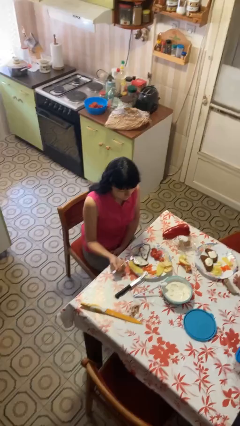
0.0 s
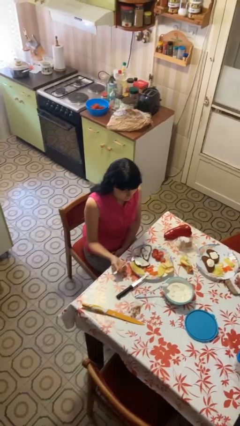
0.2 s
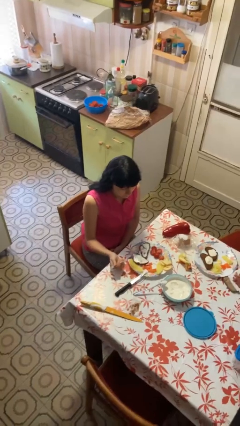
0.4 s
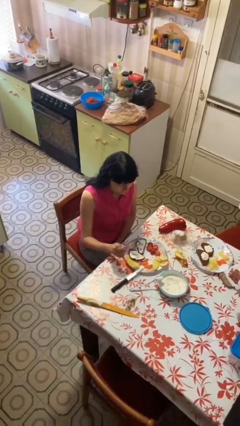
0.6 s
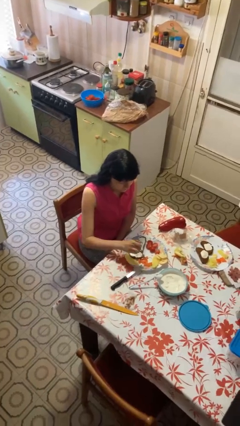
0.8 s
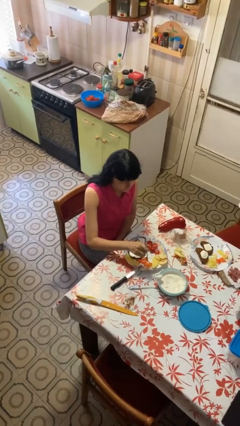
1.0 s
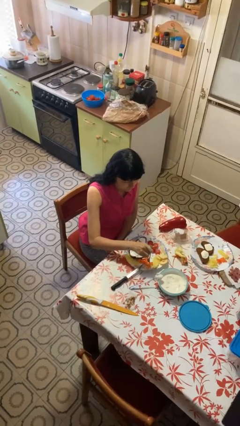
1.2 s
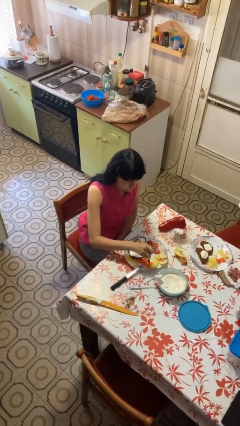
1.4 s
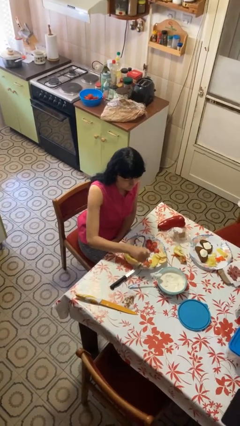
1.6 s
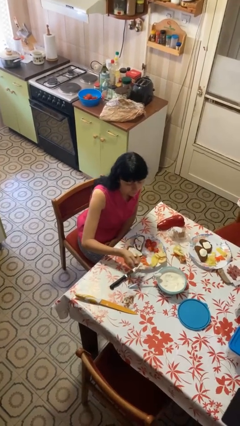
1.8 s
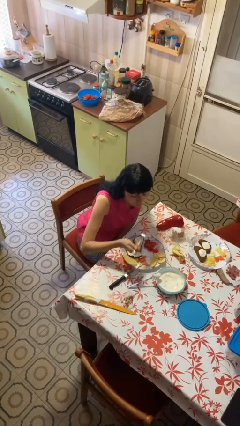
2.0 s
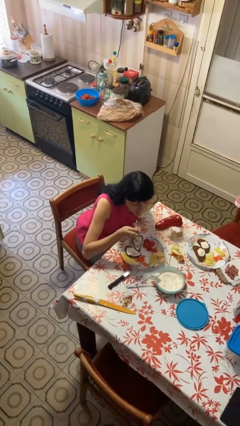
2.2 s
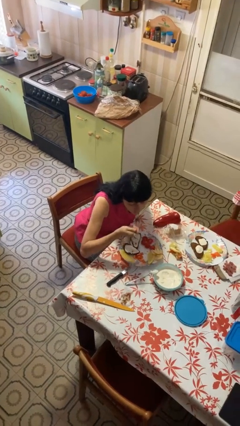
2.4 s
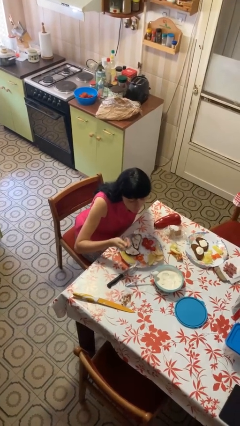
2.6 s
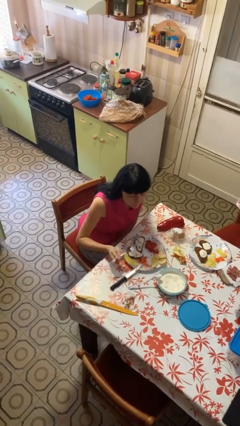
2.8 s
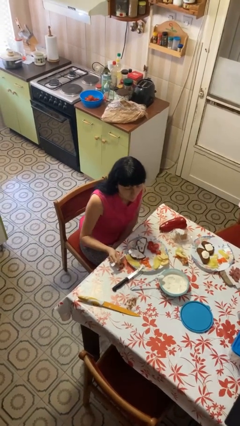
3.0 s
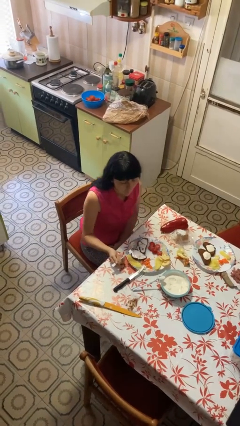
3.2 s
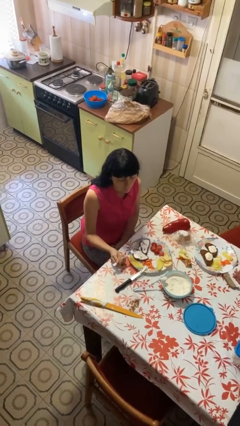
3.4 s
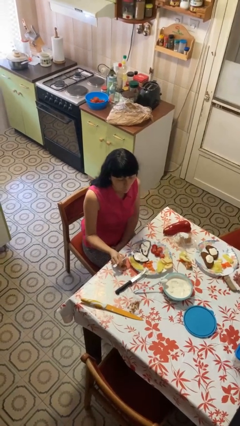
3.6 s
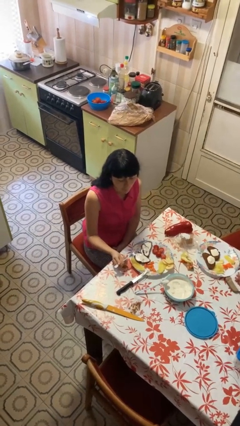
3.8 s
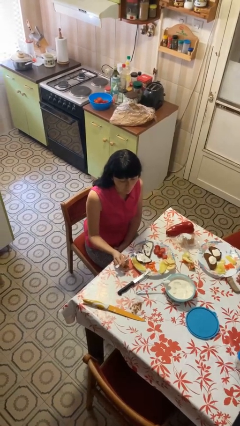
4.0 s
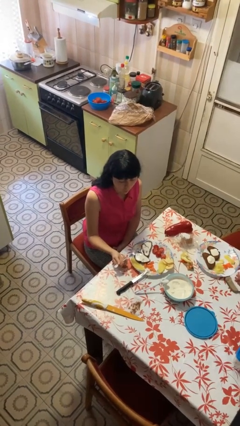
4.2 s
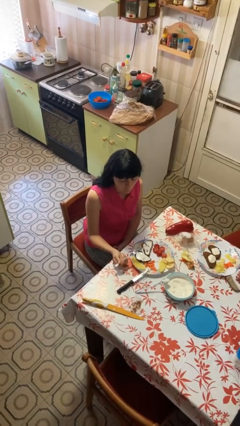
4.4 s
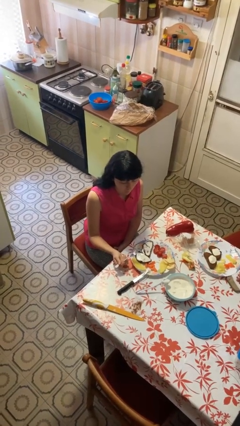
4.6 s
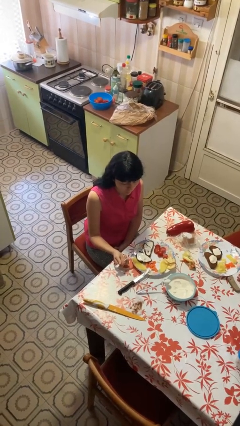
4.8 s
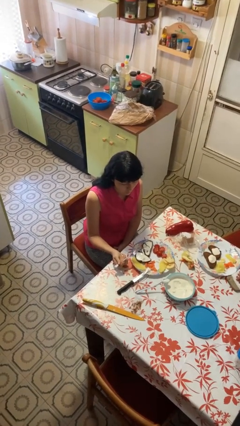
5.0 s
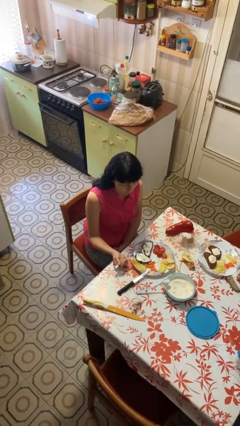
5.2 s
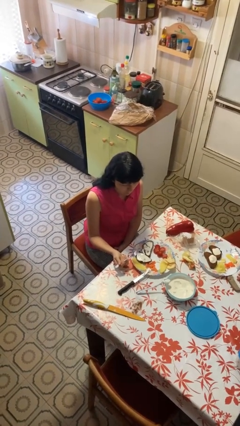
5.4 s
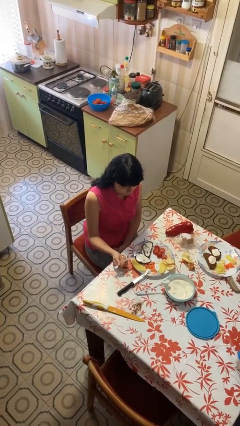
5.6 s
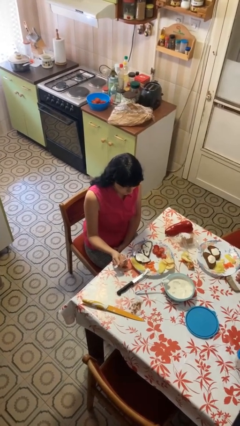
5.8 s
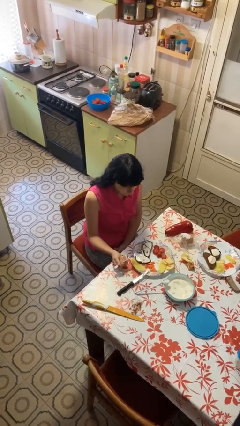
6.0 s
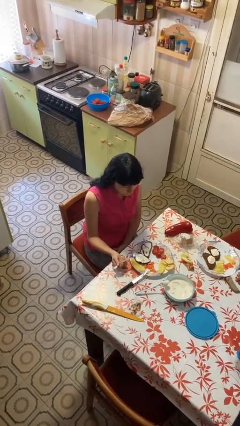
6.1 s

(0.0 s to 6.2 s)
person eats with utensil

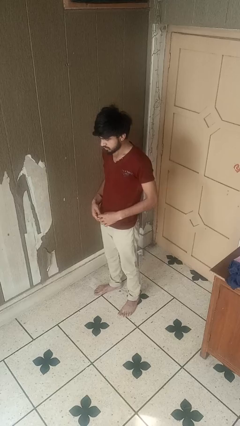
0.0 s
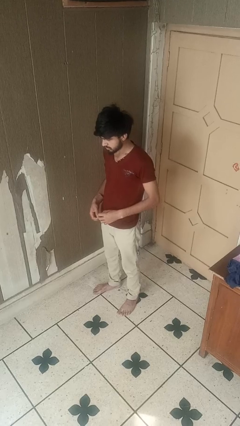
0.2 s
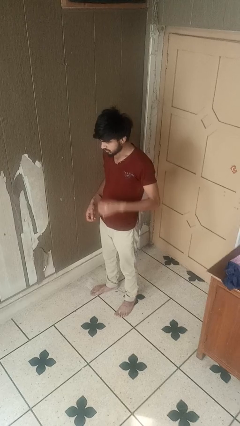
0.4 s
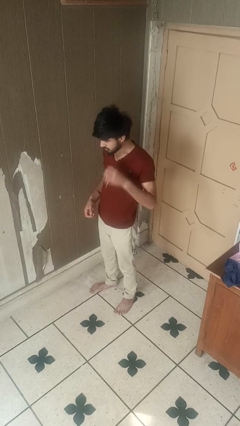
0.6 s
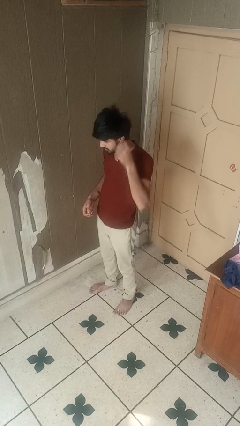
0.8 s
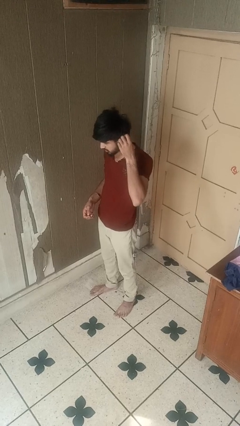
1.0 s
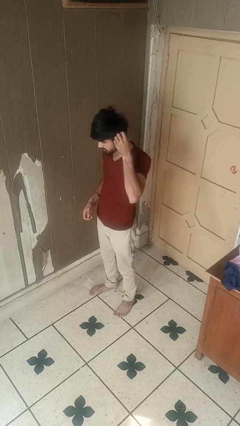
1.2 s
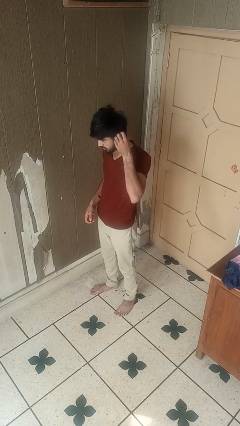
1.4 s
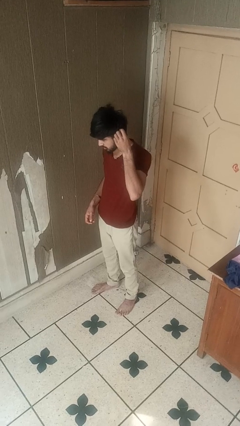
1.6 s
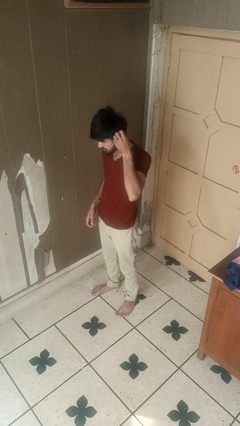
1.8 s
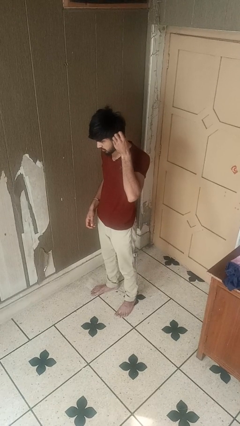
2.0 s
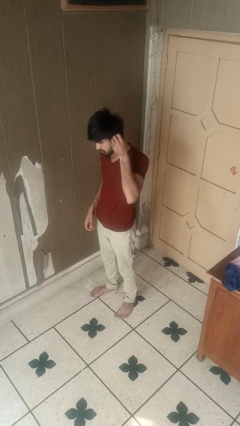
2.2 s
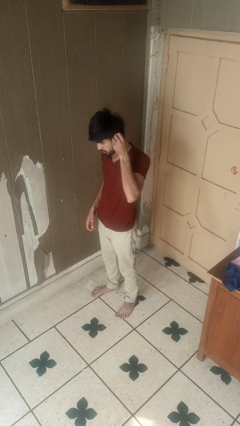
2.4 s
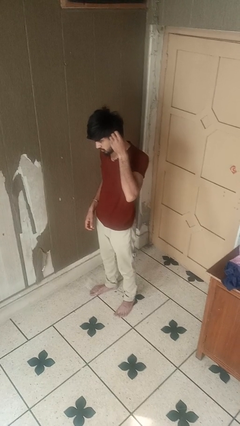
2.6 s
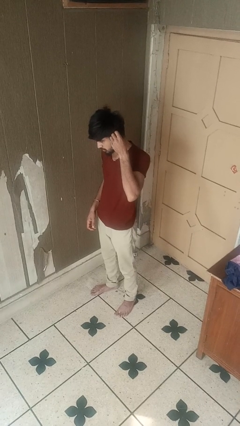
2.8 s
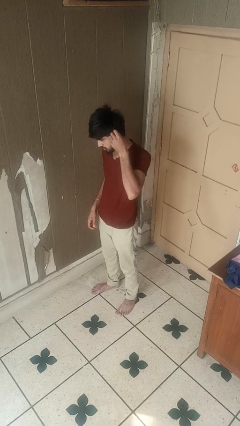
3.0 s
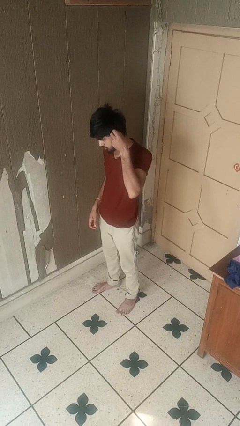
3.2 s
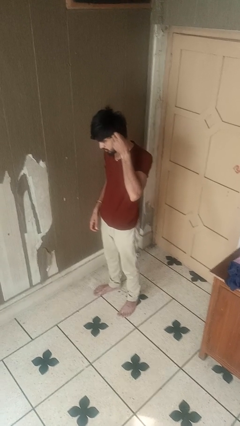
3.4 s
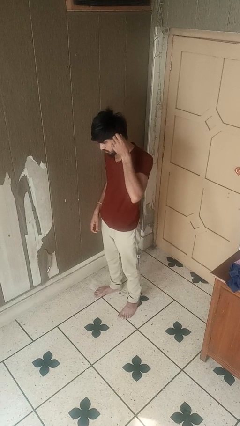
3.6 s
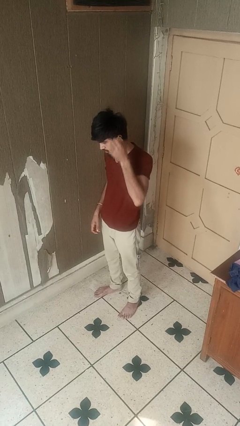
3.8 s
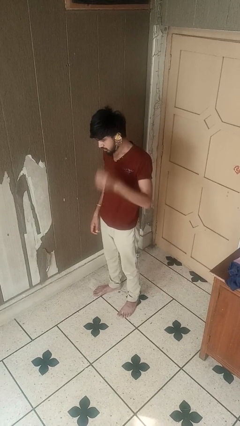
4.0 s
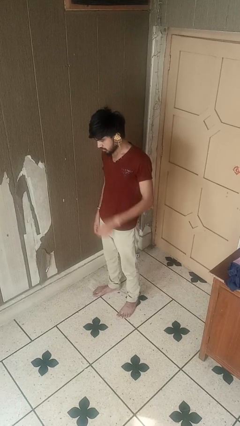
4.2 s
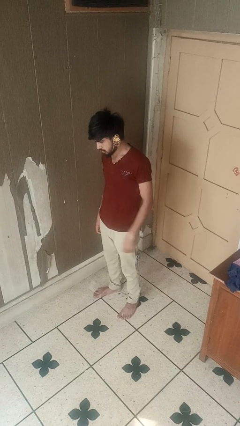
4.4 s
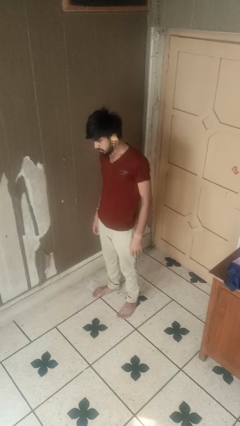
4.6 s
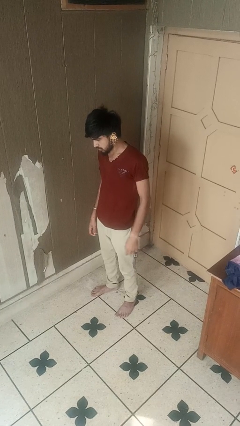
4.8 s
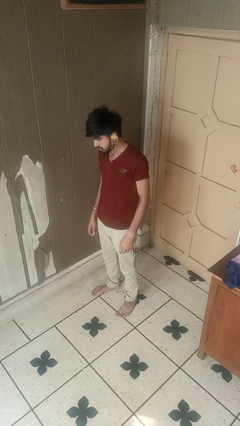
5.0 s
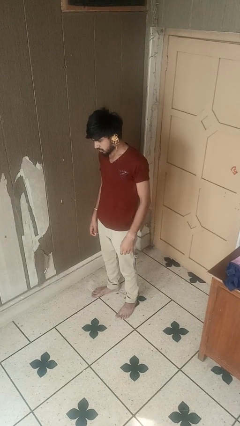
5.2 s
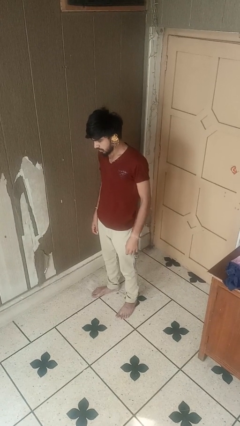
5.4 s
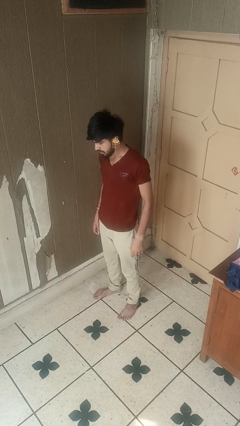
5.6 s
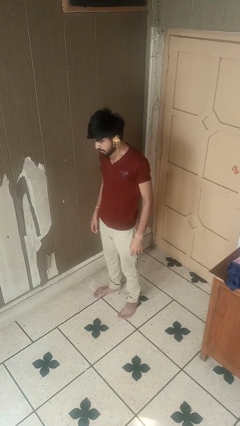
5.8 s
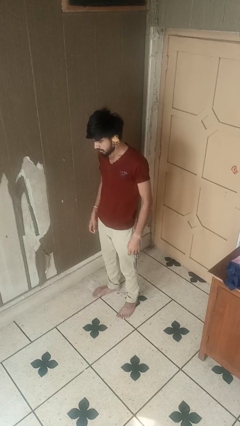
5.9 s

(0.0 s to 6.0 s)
person puts on earrings

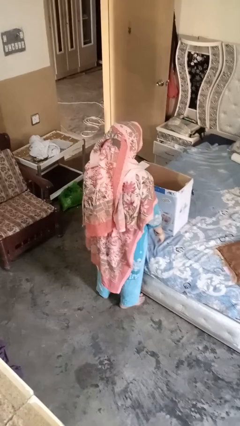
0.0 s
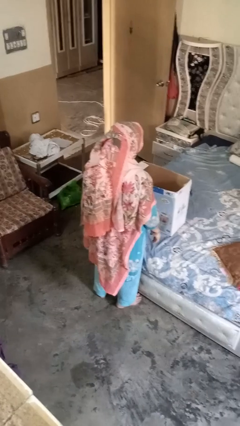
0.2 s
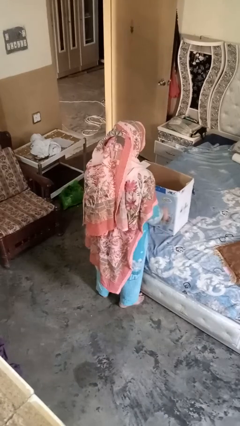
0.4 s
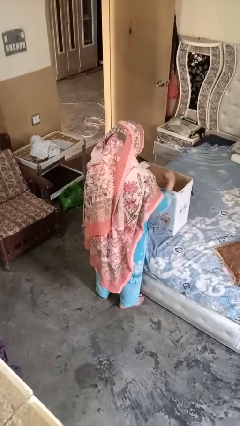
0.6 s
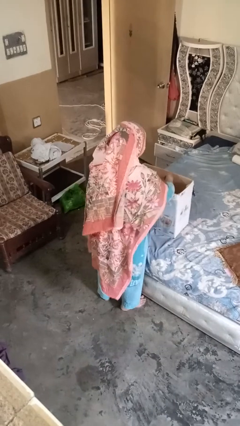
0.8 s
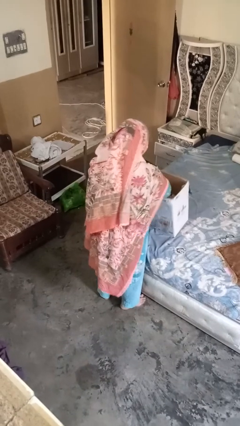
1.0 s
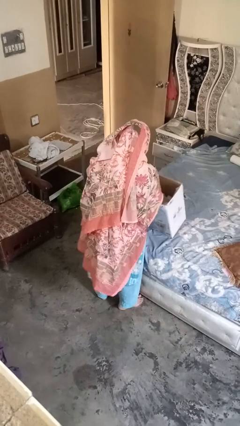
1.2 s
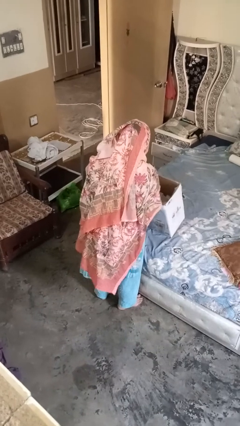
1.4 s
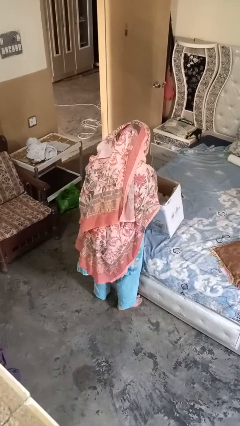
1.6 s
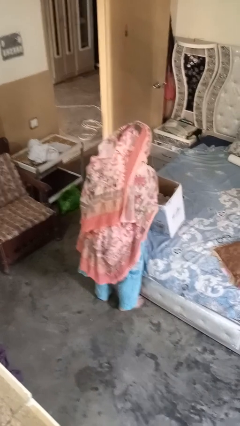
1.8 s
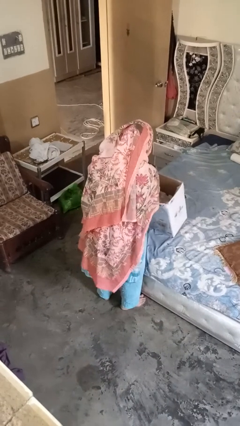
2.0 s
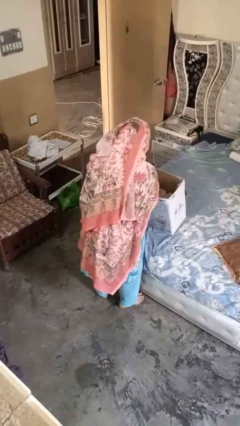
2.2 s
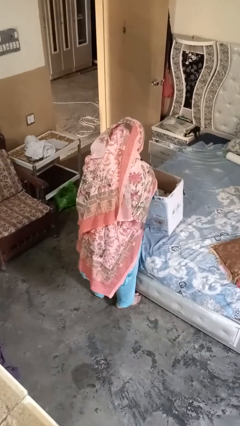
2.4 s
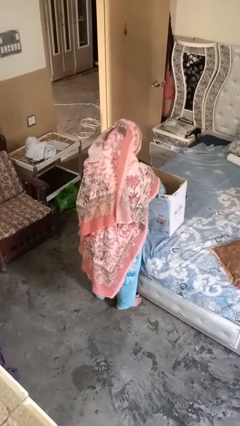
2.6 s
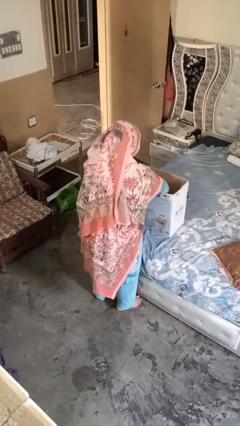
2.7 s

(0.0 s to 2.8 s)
person searches in box

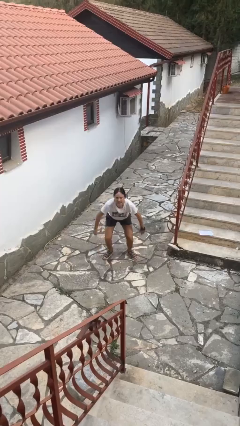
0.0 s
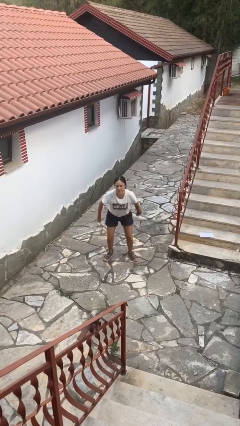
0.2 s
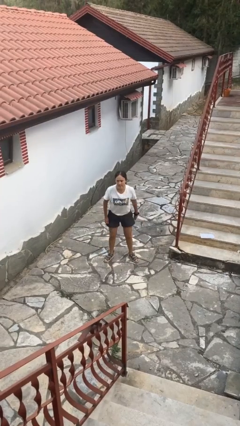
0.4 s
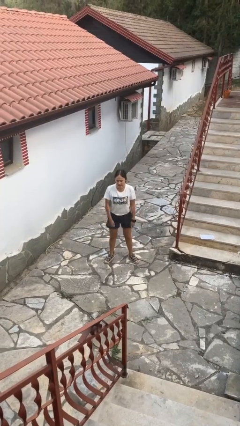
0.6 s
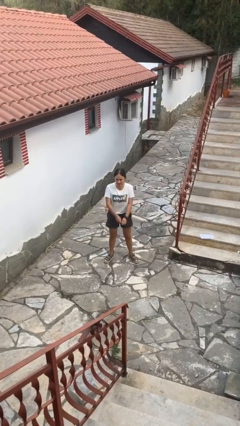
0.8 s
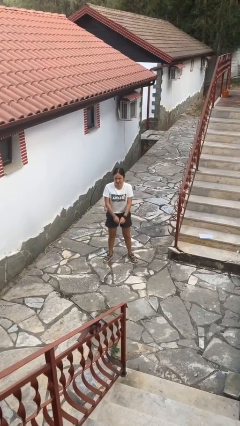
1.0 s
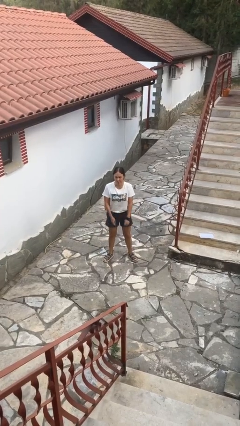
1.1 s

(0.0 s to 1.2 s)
person stands up

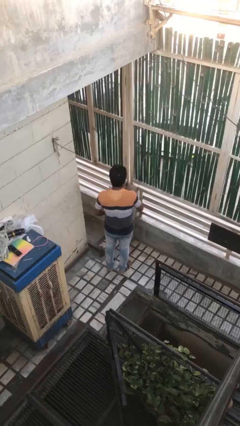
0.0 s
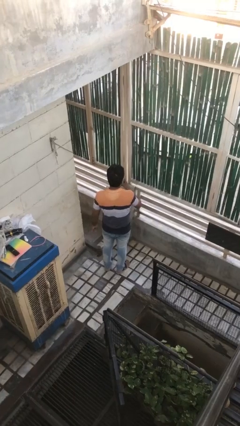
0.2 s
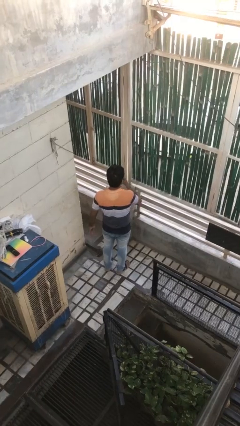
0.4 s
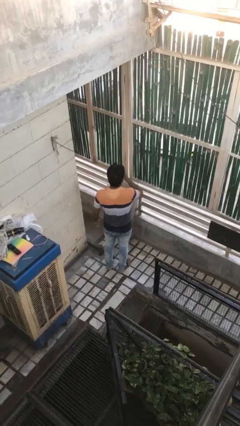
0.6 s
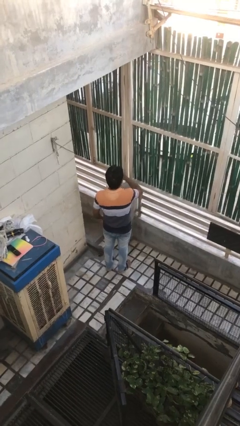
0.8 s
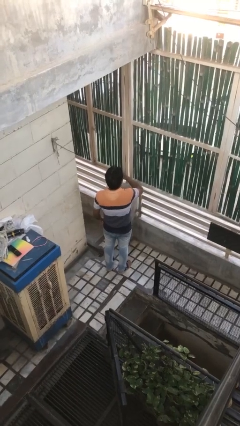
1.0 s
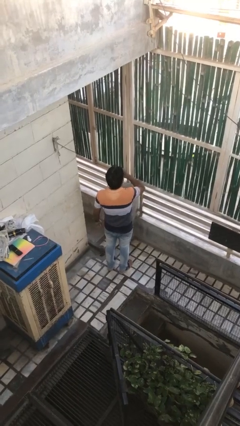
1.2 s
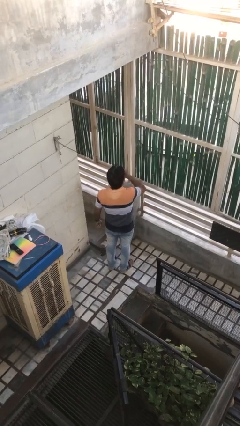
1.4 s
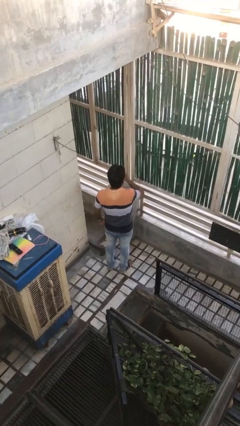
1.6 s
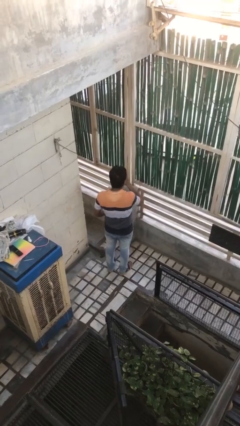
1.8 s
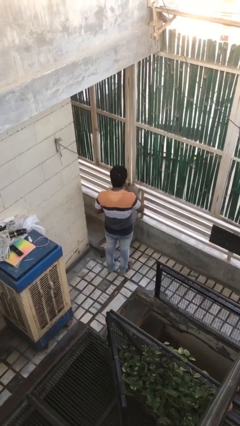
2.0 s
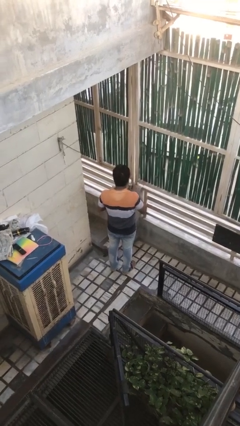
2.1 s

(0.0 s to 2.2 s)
person drinks from beverage can
